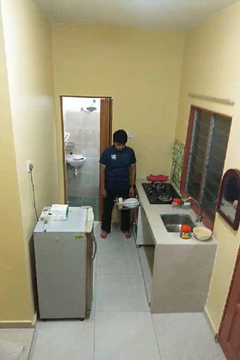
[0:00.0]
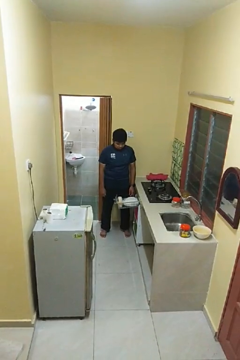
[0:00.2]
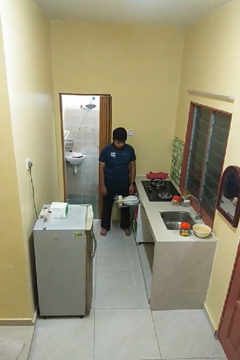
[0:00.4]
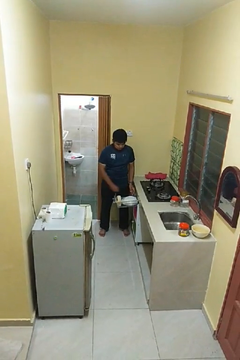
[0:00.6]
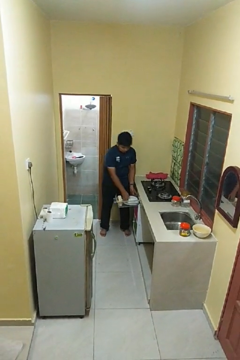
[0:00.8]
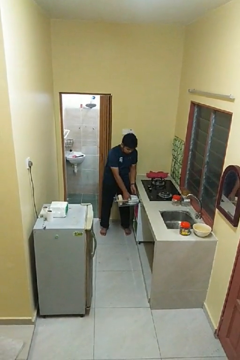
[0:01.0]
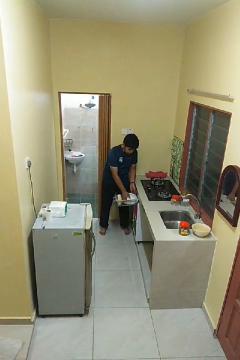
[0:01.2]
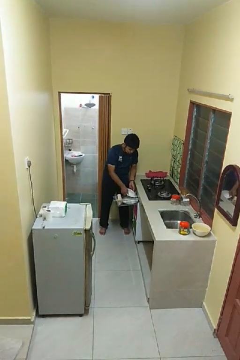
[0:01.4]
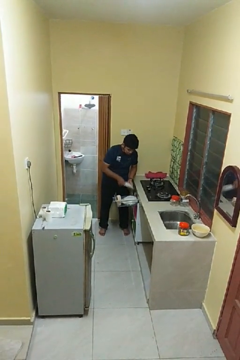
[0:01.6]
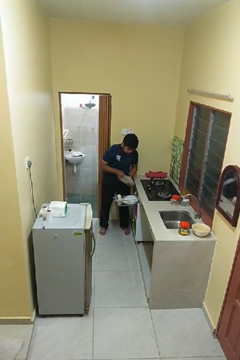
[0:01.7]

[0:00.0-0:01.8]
person takes object from kitchen drawer

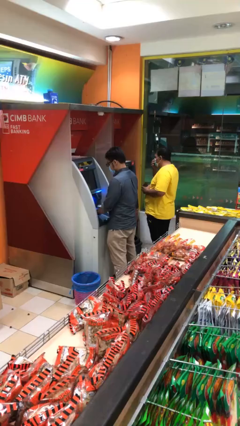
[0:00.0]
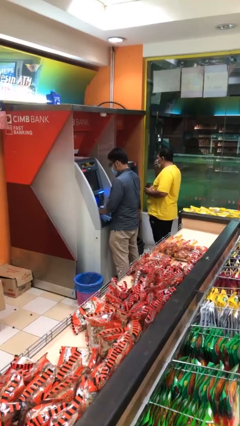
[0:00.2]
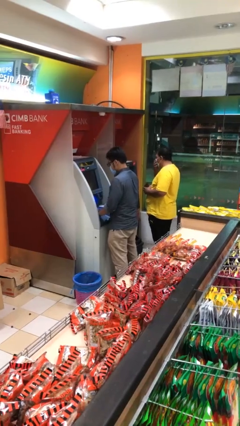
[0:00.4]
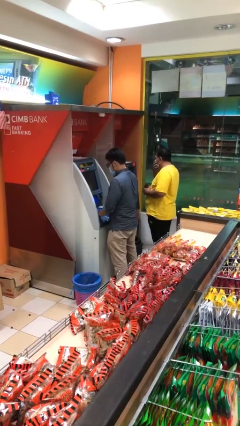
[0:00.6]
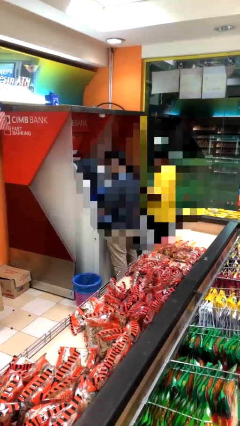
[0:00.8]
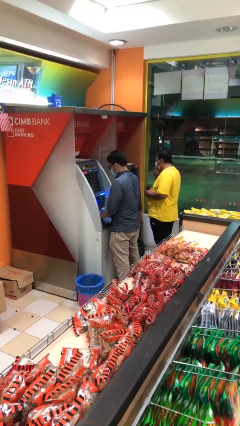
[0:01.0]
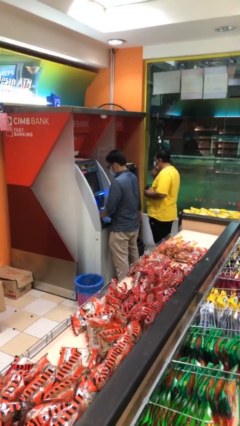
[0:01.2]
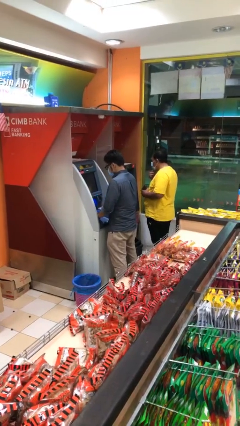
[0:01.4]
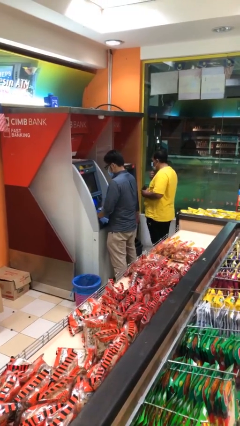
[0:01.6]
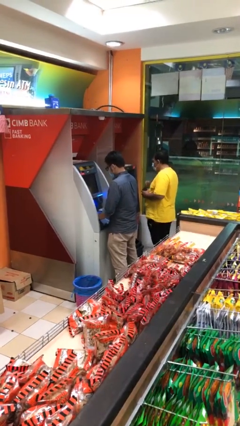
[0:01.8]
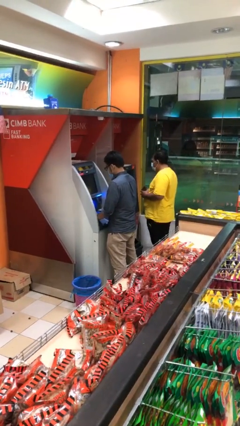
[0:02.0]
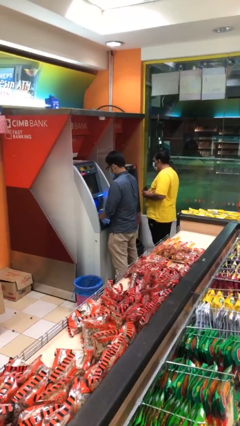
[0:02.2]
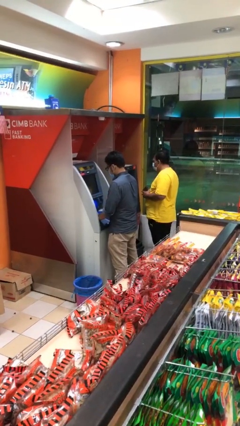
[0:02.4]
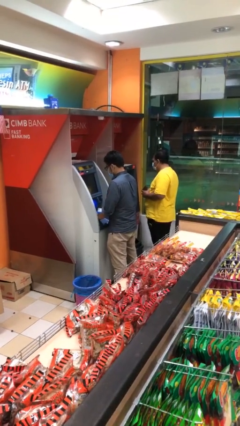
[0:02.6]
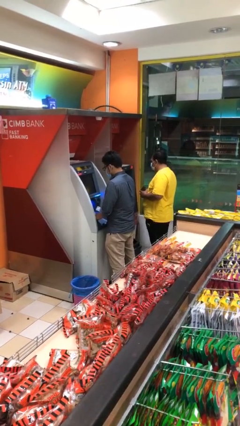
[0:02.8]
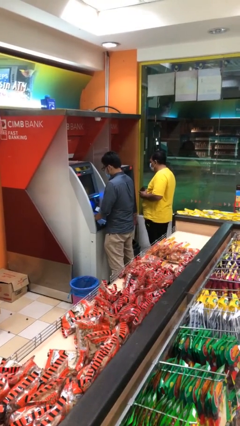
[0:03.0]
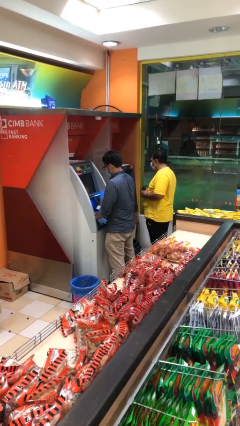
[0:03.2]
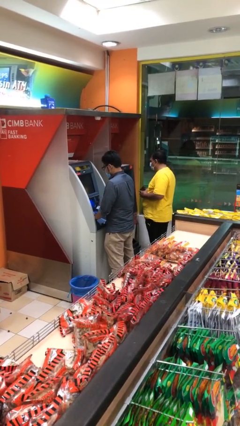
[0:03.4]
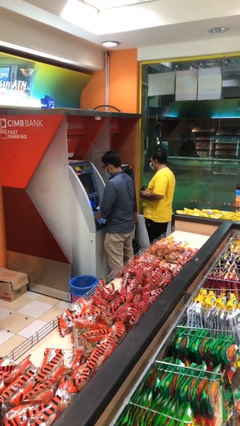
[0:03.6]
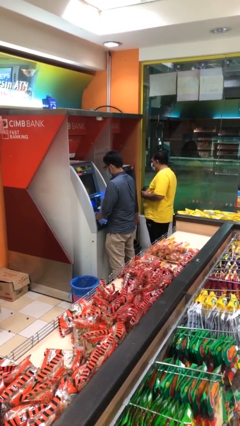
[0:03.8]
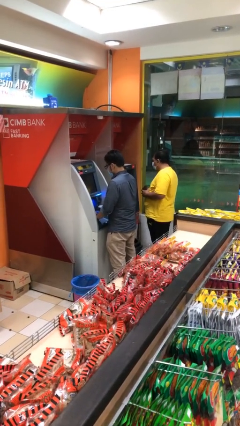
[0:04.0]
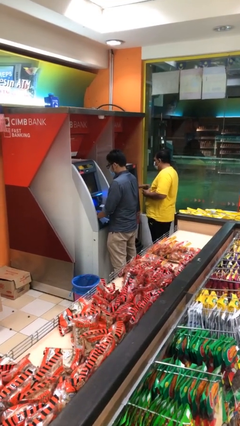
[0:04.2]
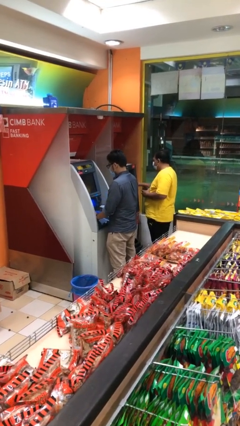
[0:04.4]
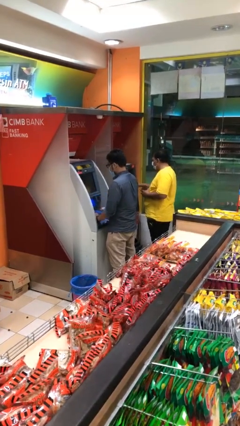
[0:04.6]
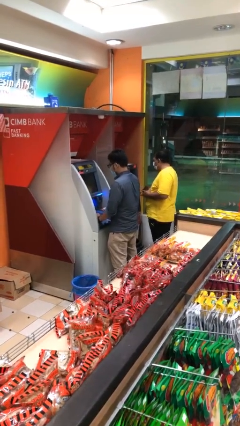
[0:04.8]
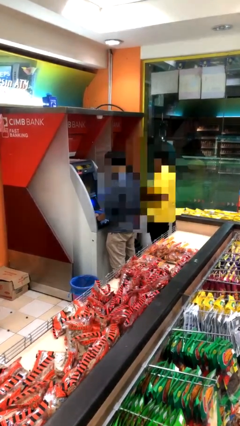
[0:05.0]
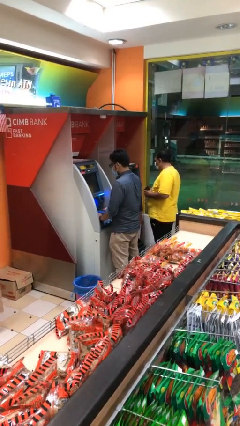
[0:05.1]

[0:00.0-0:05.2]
person purchases from machine

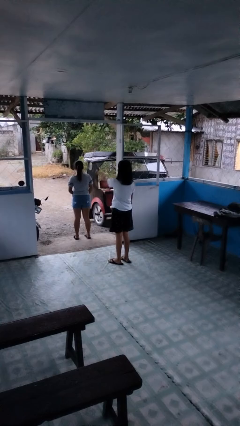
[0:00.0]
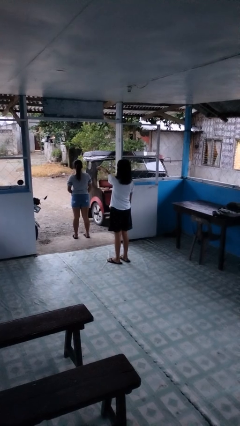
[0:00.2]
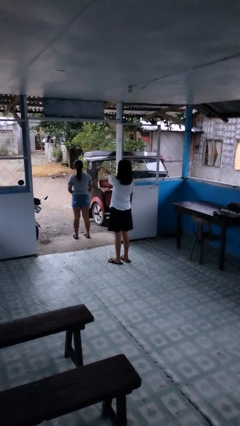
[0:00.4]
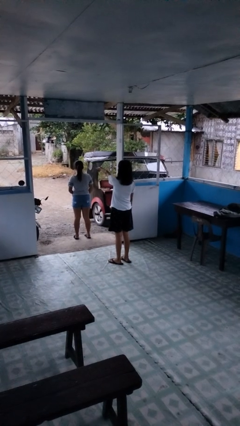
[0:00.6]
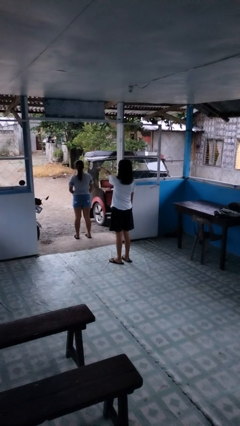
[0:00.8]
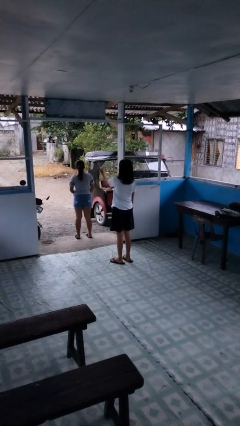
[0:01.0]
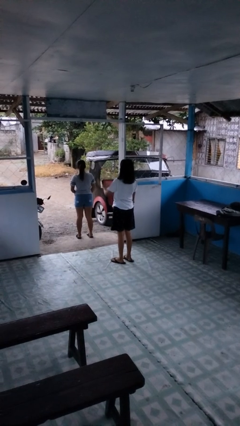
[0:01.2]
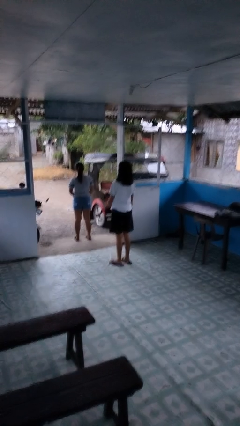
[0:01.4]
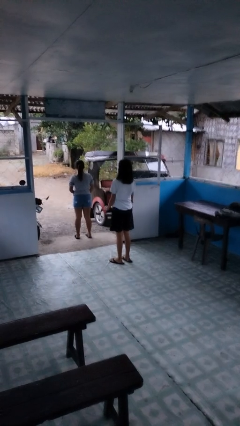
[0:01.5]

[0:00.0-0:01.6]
person points at person

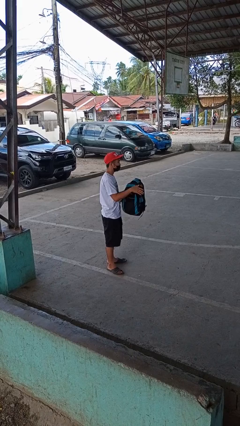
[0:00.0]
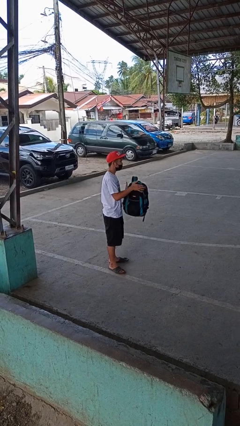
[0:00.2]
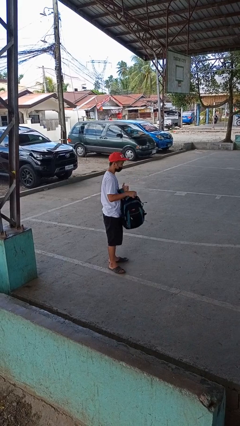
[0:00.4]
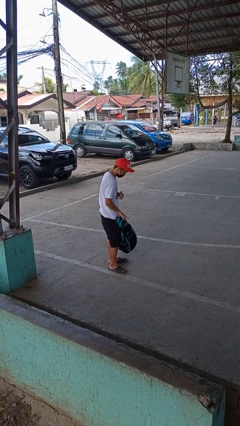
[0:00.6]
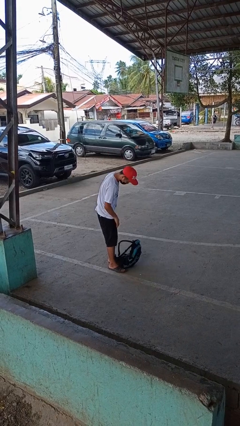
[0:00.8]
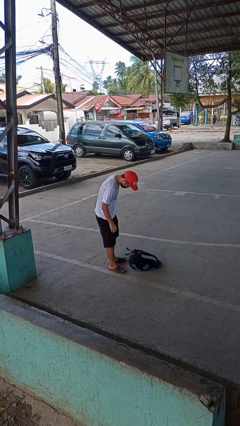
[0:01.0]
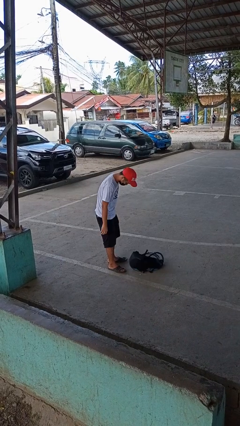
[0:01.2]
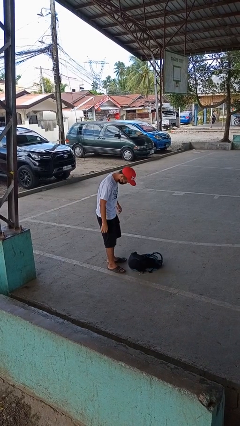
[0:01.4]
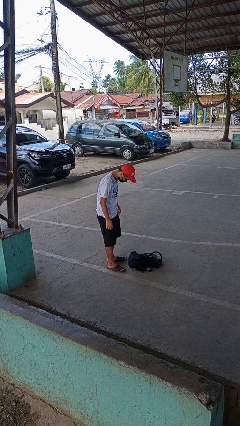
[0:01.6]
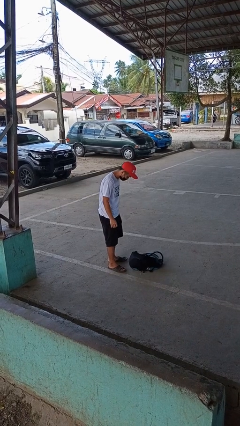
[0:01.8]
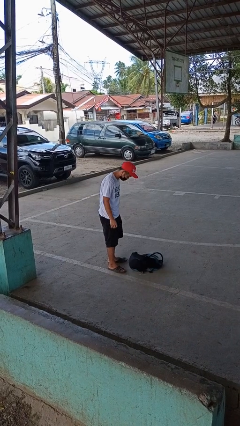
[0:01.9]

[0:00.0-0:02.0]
person drops object

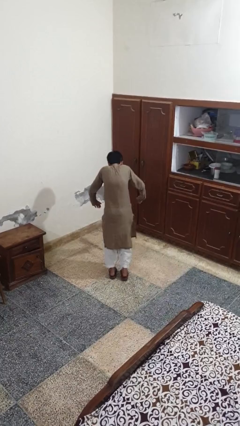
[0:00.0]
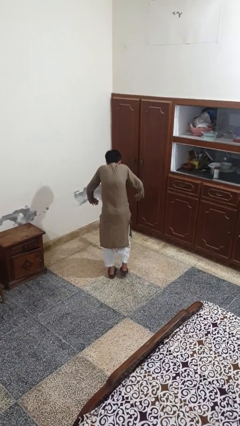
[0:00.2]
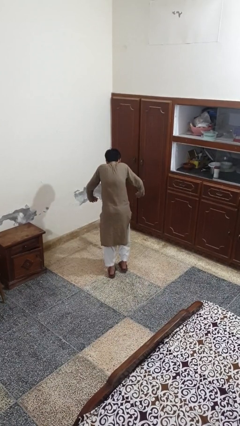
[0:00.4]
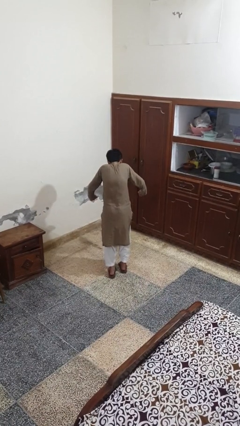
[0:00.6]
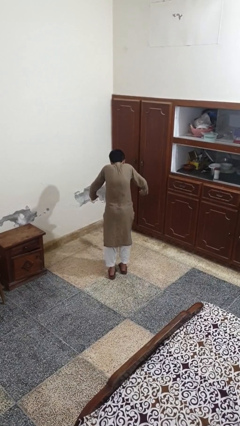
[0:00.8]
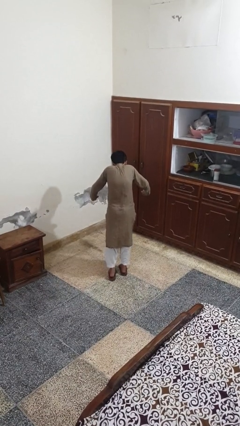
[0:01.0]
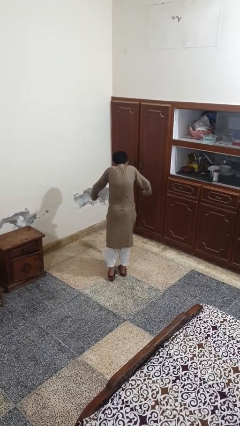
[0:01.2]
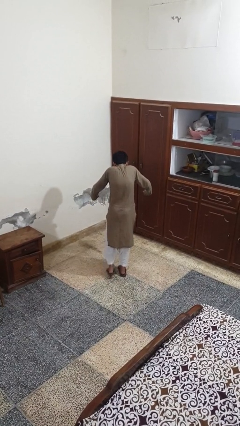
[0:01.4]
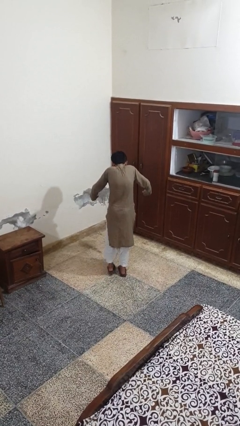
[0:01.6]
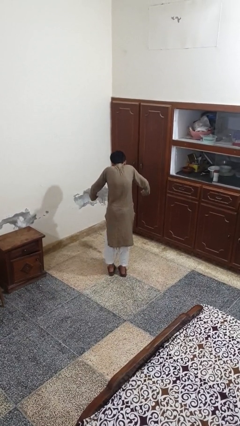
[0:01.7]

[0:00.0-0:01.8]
person walks tiptoe

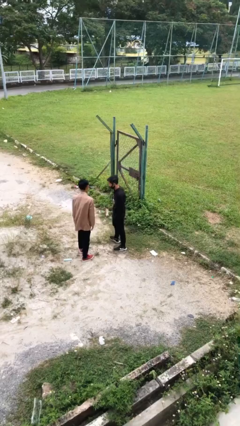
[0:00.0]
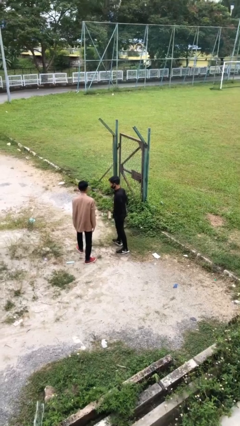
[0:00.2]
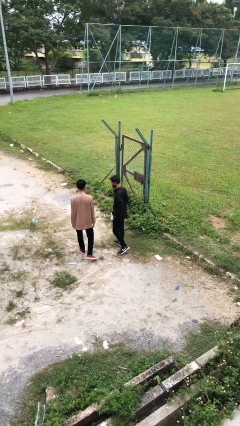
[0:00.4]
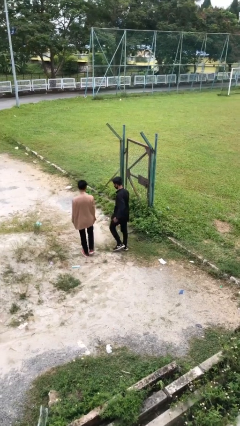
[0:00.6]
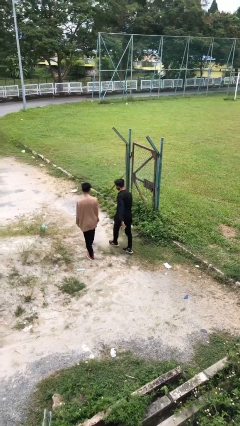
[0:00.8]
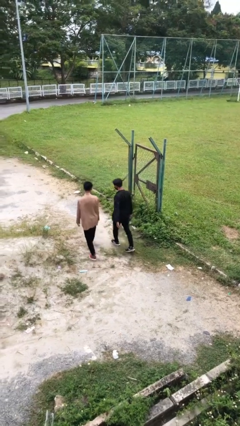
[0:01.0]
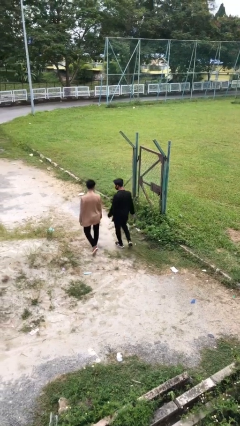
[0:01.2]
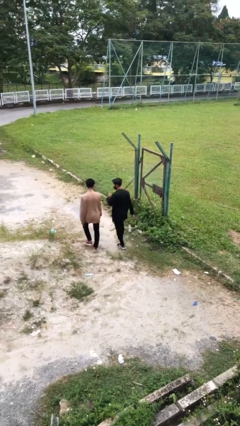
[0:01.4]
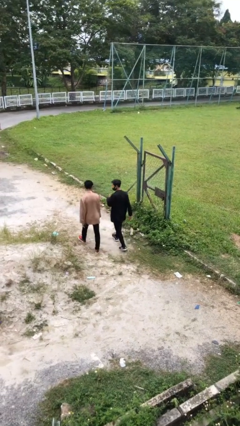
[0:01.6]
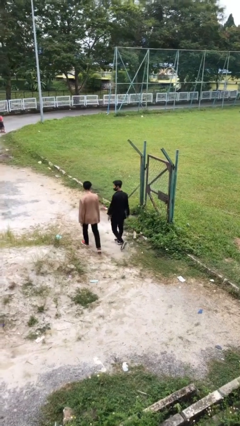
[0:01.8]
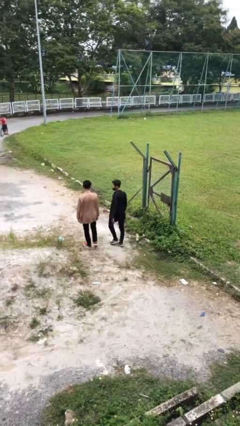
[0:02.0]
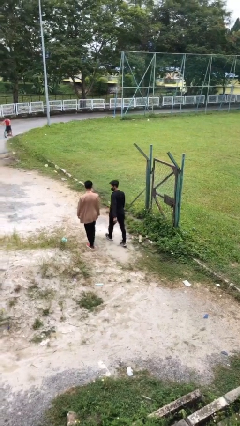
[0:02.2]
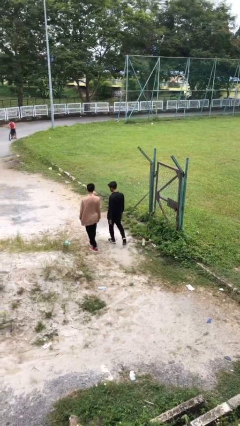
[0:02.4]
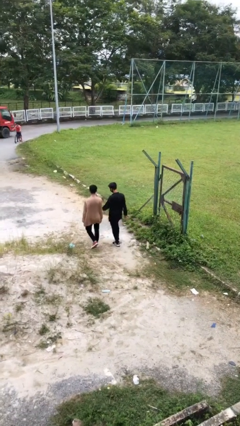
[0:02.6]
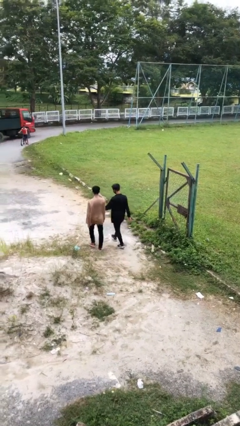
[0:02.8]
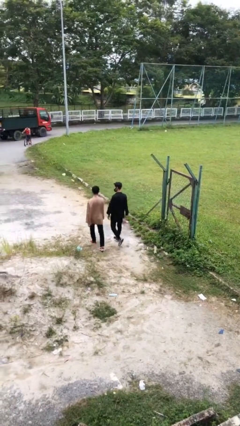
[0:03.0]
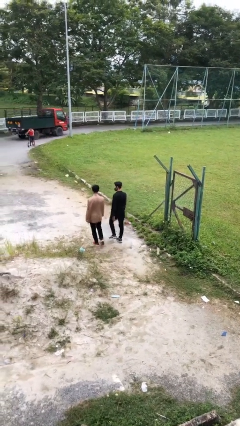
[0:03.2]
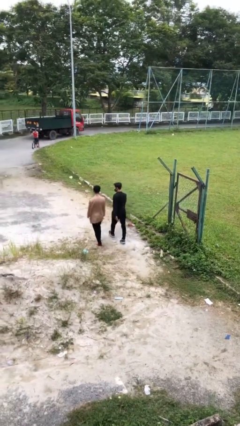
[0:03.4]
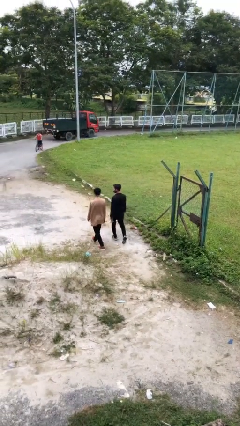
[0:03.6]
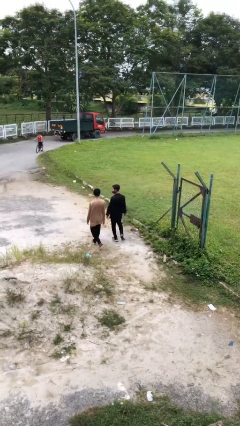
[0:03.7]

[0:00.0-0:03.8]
person talks to person

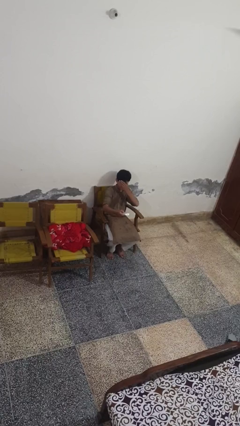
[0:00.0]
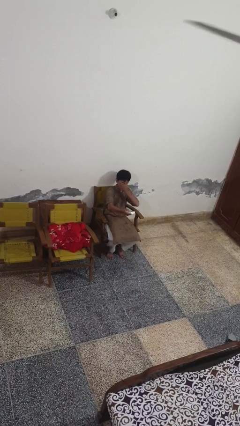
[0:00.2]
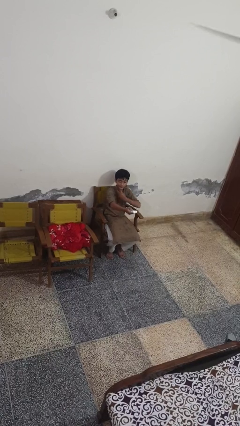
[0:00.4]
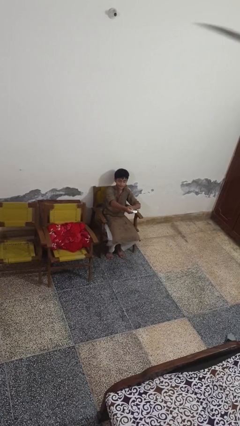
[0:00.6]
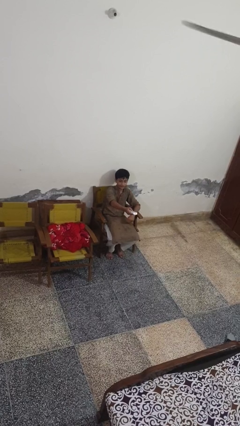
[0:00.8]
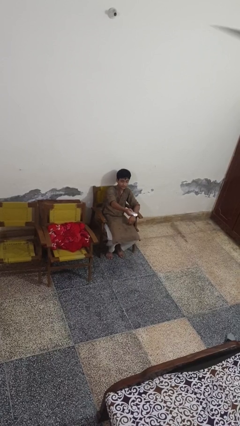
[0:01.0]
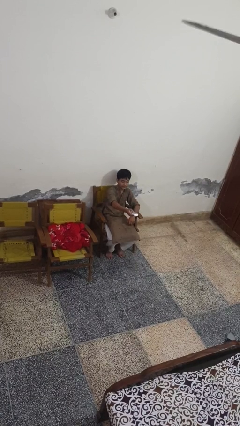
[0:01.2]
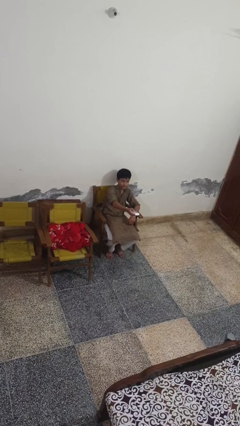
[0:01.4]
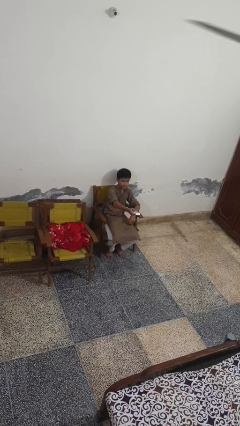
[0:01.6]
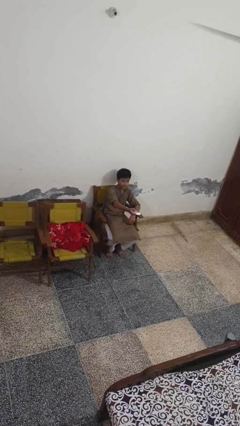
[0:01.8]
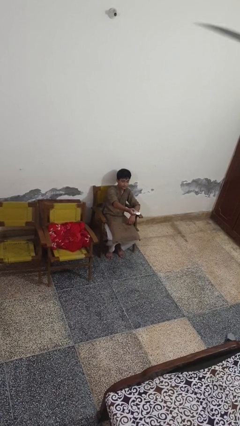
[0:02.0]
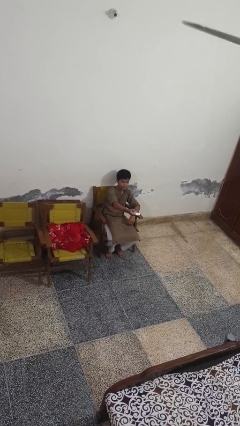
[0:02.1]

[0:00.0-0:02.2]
person uses television remote
